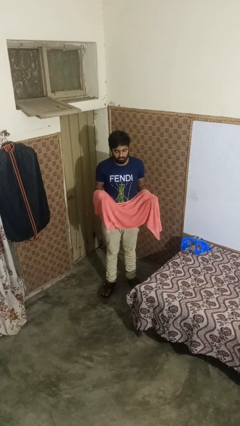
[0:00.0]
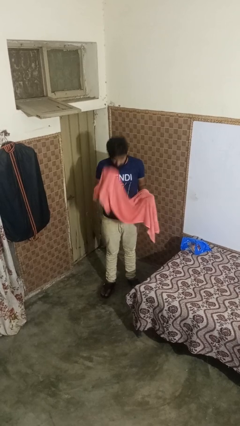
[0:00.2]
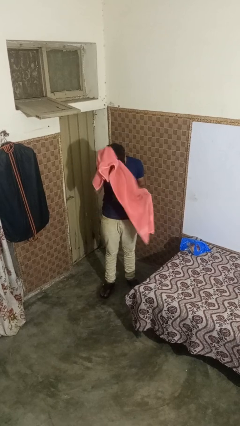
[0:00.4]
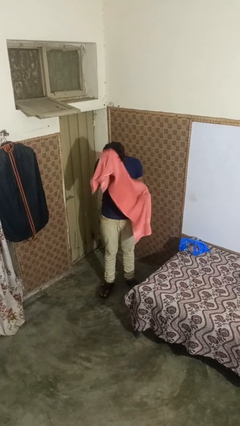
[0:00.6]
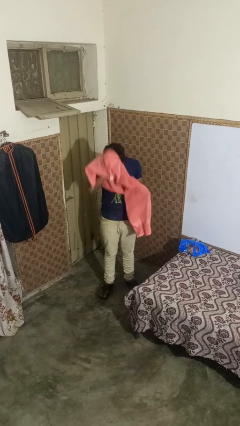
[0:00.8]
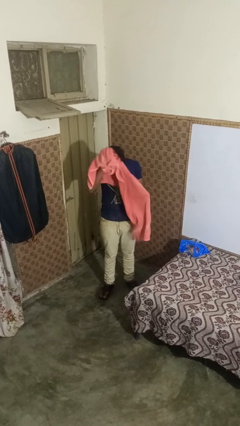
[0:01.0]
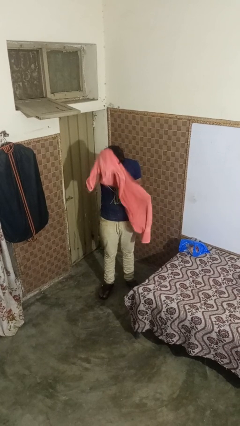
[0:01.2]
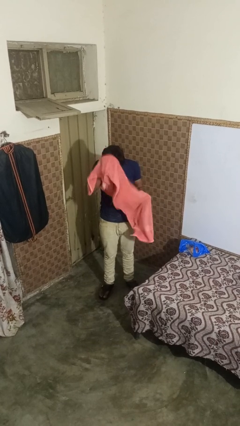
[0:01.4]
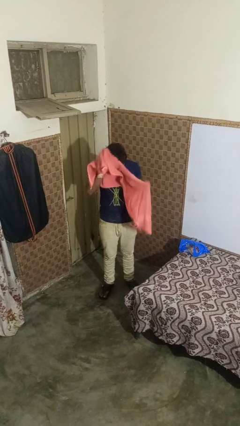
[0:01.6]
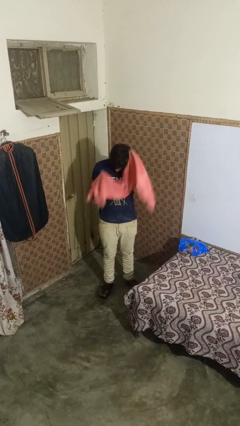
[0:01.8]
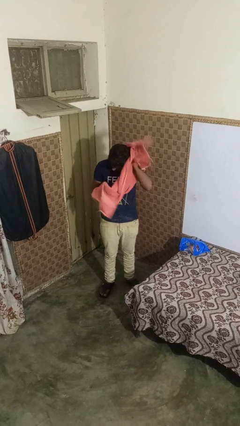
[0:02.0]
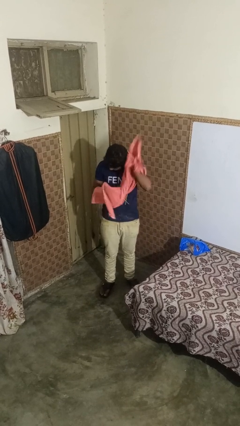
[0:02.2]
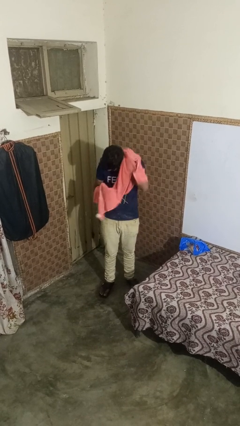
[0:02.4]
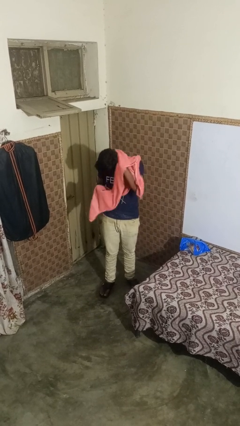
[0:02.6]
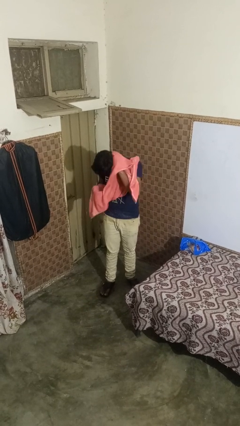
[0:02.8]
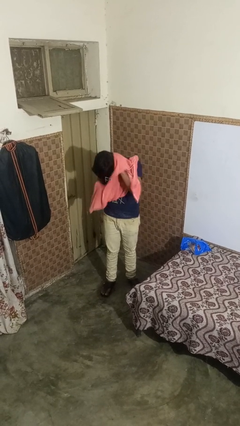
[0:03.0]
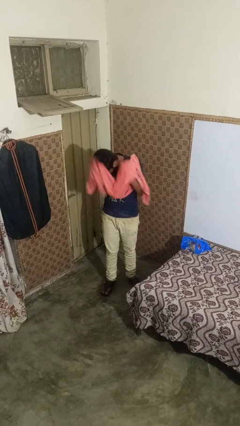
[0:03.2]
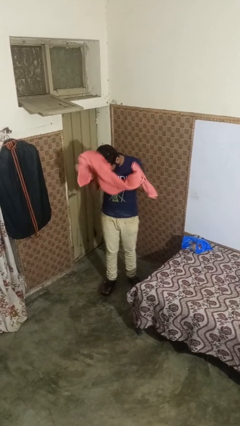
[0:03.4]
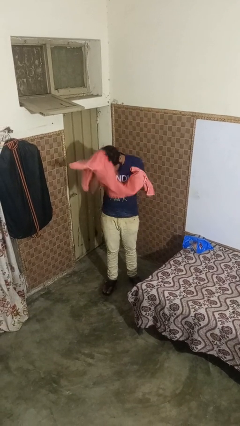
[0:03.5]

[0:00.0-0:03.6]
person dries hair with towel

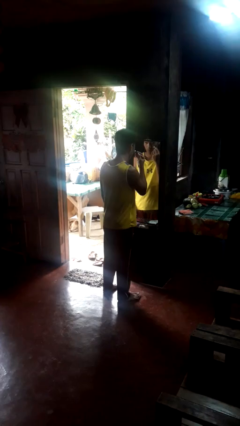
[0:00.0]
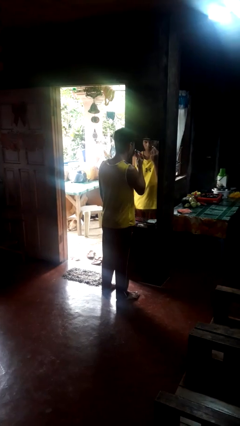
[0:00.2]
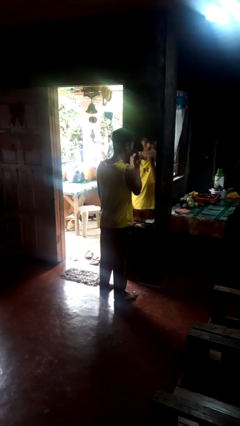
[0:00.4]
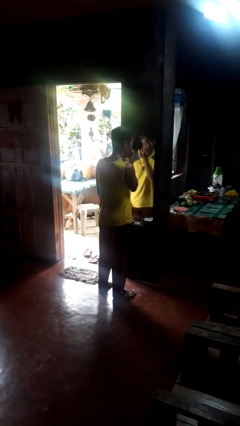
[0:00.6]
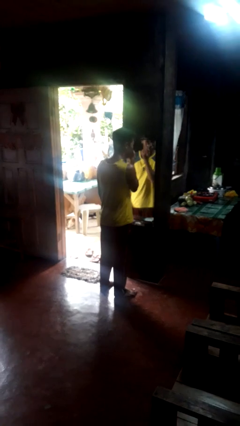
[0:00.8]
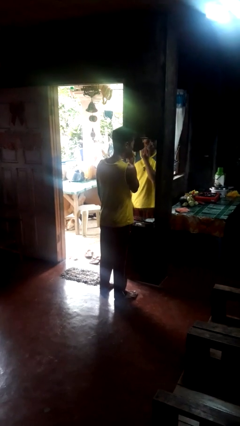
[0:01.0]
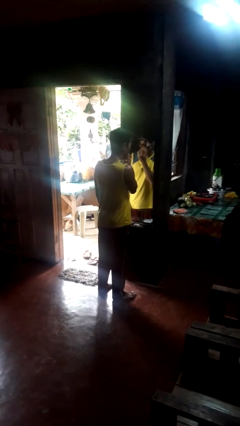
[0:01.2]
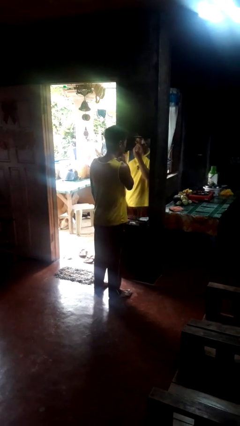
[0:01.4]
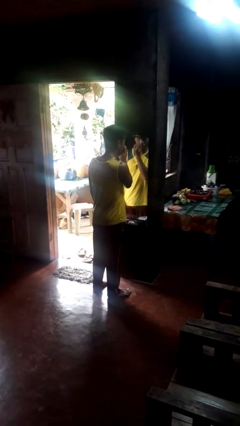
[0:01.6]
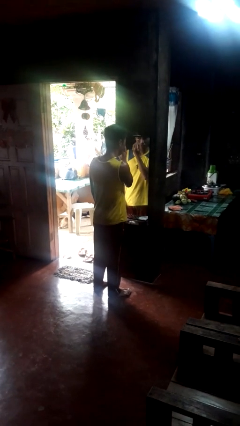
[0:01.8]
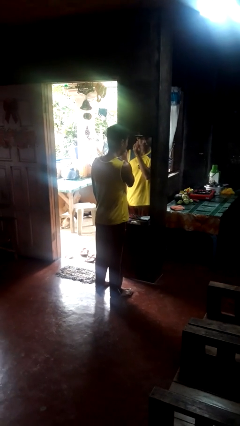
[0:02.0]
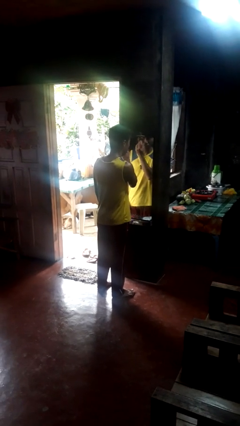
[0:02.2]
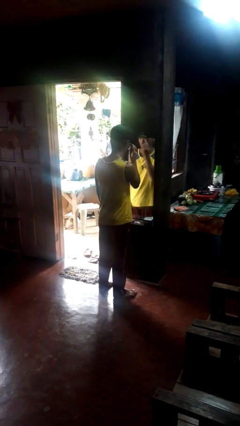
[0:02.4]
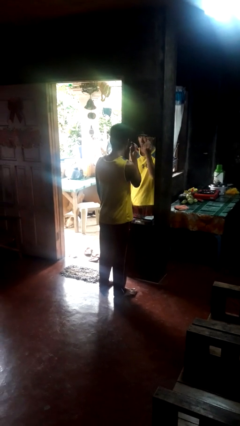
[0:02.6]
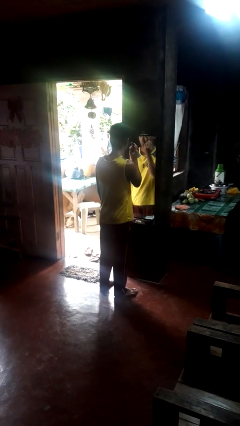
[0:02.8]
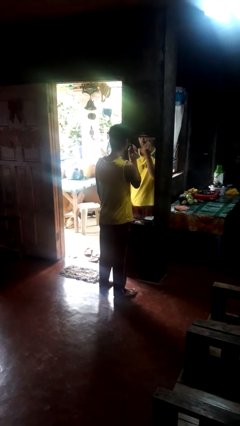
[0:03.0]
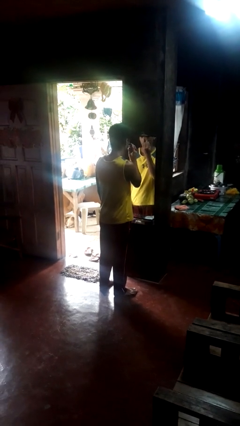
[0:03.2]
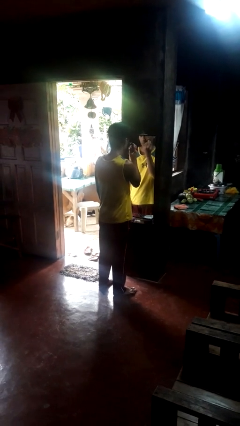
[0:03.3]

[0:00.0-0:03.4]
person applies eye makeup

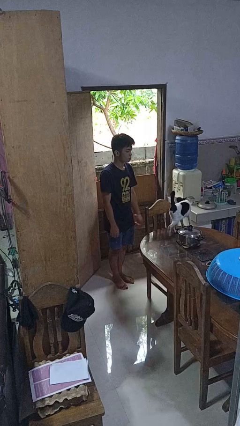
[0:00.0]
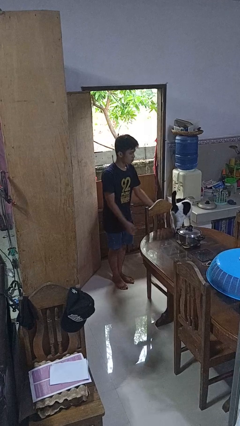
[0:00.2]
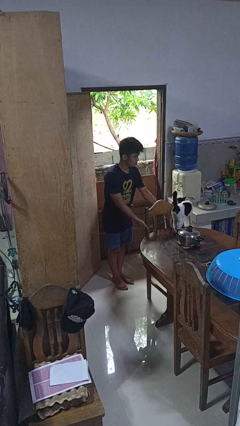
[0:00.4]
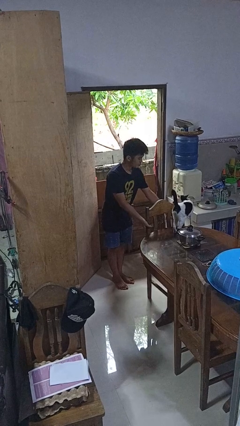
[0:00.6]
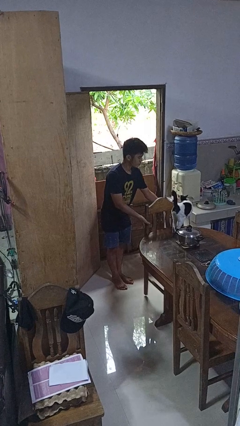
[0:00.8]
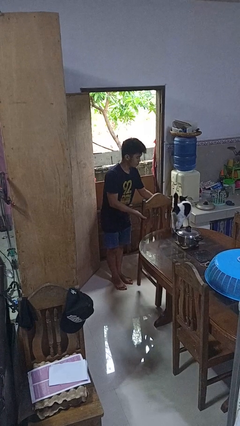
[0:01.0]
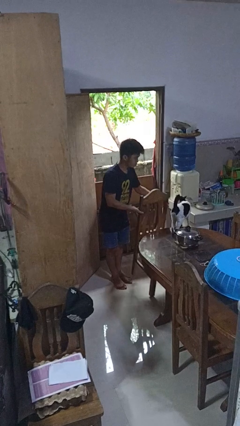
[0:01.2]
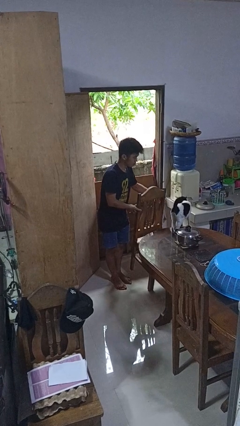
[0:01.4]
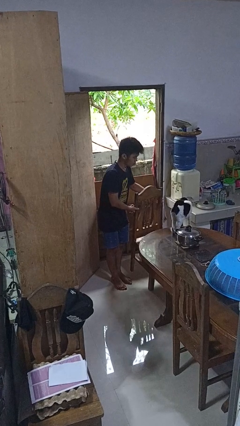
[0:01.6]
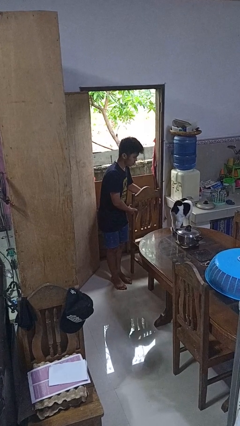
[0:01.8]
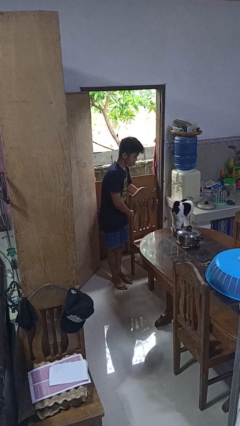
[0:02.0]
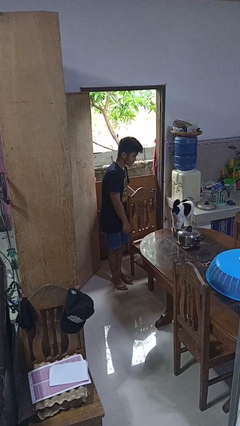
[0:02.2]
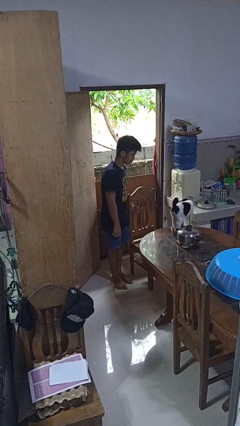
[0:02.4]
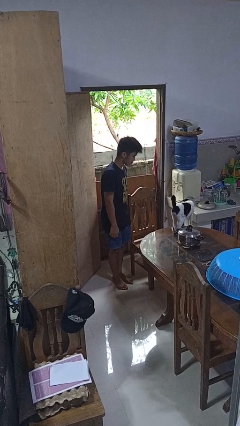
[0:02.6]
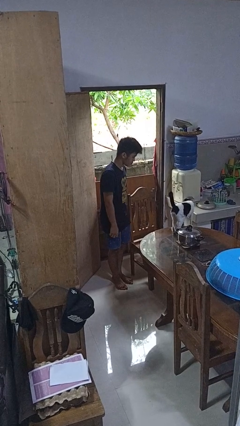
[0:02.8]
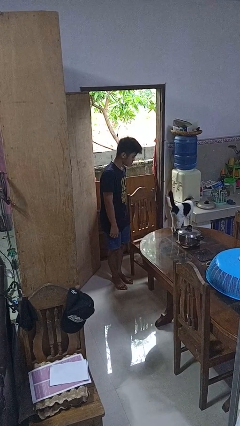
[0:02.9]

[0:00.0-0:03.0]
person pulls out chair

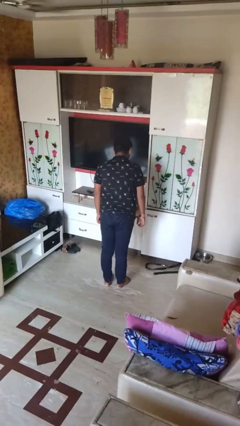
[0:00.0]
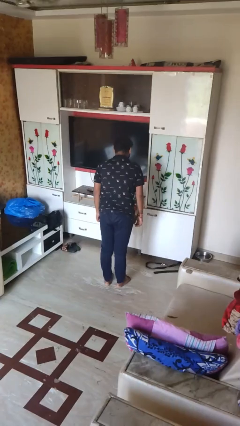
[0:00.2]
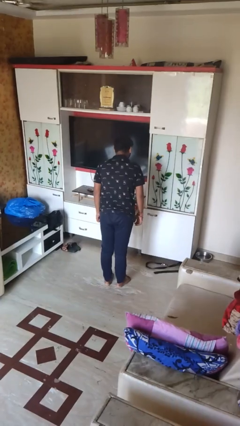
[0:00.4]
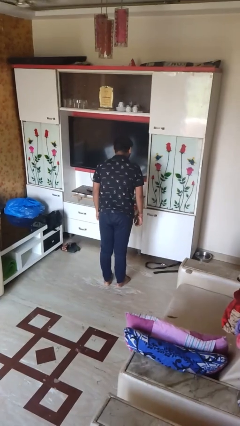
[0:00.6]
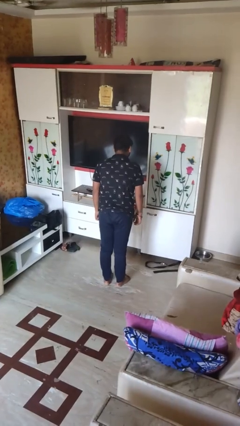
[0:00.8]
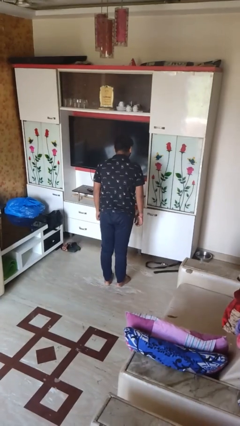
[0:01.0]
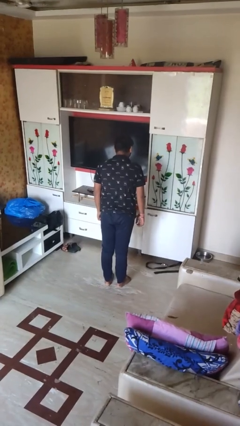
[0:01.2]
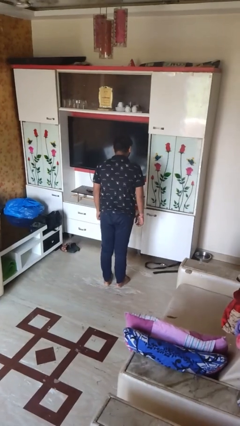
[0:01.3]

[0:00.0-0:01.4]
person wiggles hips

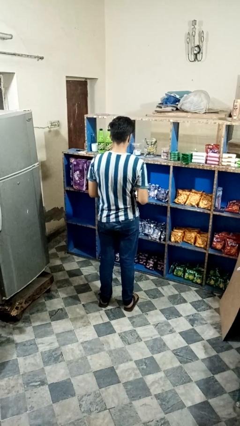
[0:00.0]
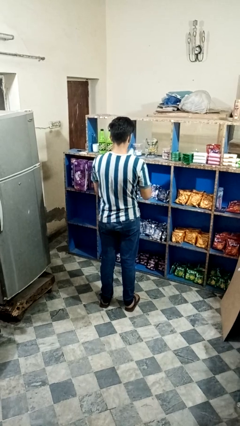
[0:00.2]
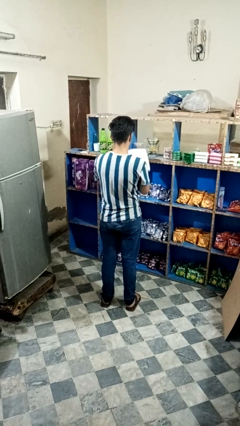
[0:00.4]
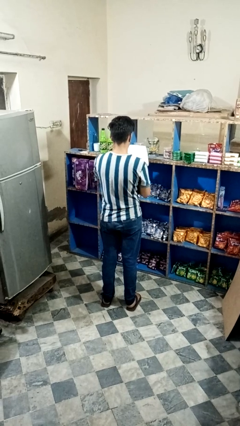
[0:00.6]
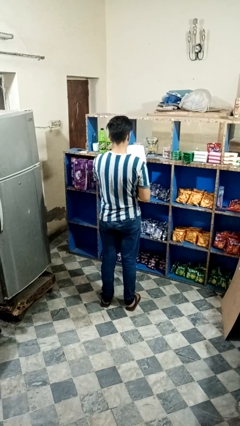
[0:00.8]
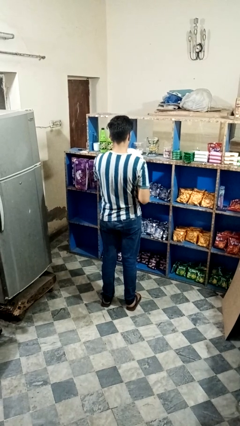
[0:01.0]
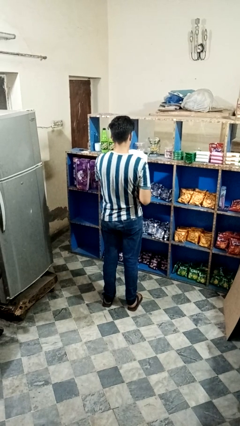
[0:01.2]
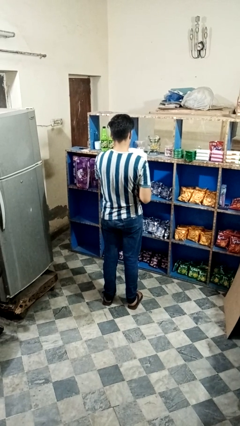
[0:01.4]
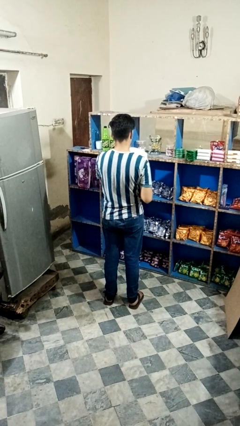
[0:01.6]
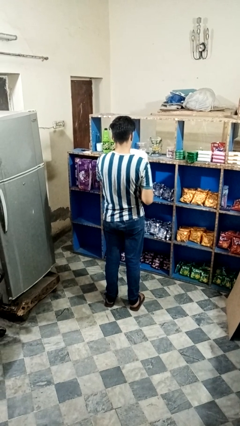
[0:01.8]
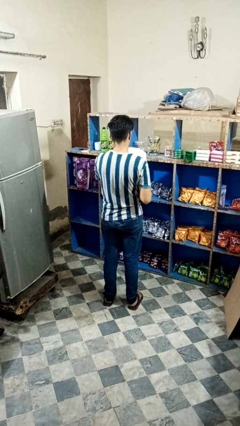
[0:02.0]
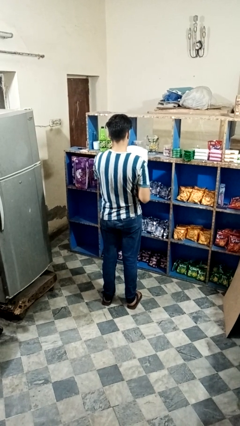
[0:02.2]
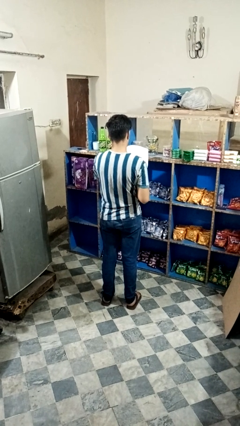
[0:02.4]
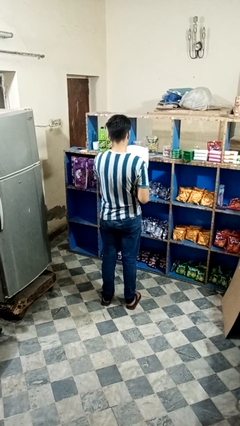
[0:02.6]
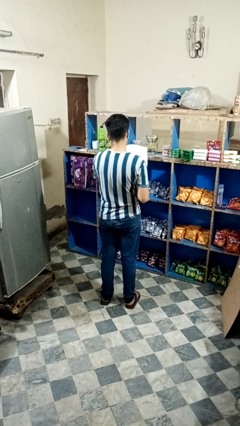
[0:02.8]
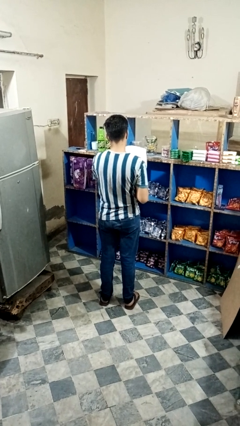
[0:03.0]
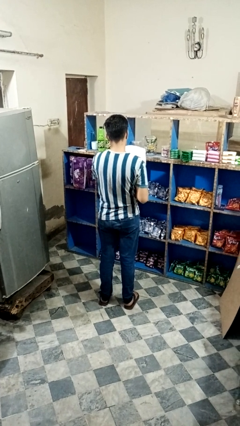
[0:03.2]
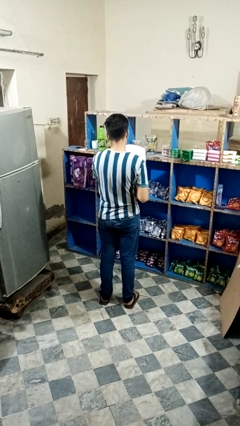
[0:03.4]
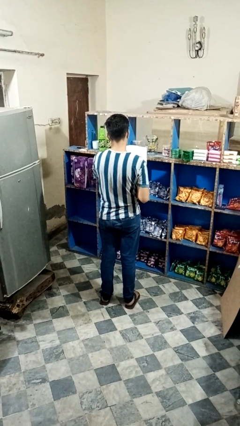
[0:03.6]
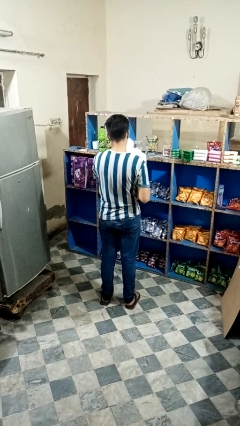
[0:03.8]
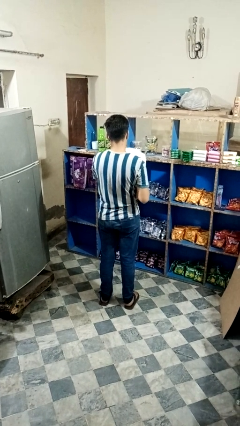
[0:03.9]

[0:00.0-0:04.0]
person reads magazine

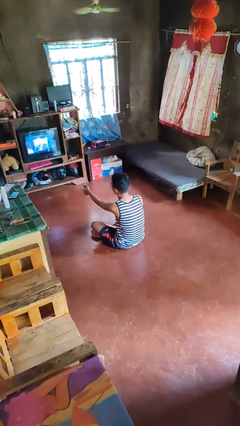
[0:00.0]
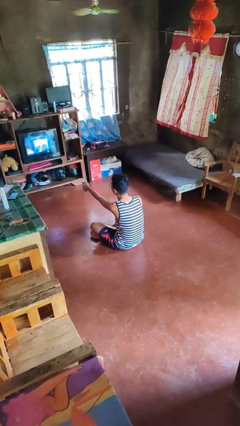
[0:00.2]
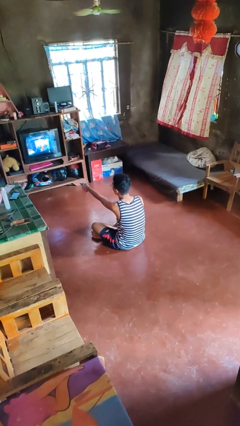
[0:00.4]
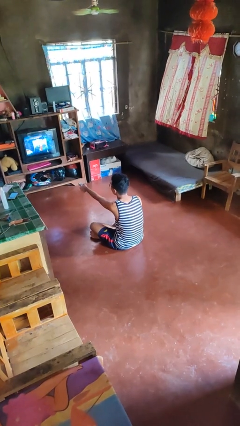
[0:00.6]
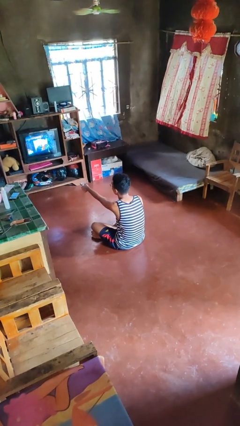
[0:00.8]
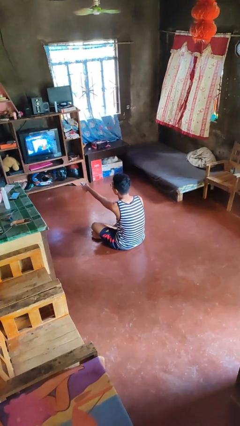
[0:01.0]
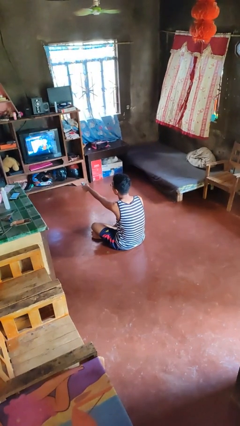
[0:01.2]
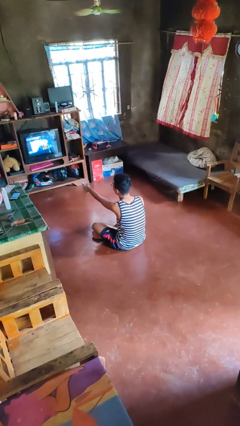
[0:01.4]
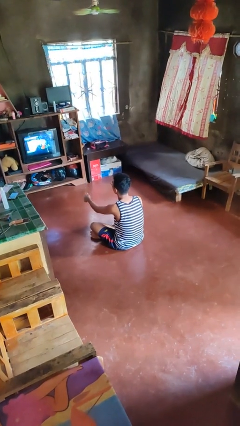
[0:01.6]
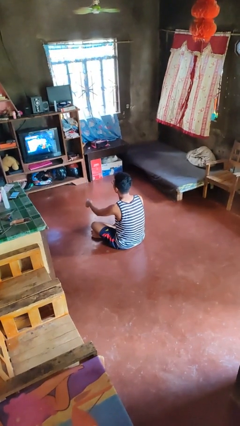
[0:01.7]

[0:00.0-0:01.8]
person uses television remote
